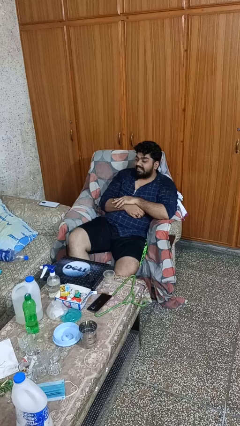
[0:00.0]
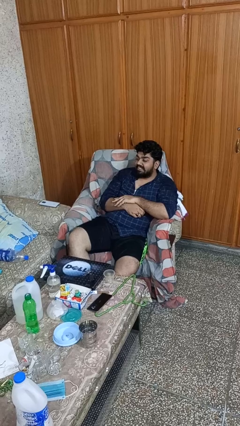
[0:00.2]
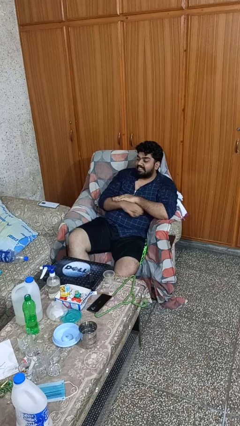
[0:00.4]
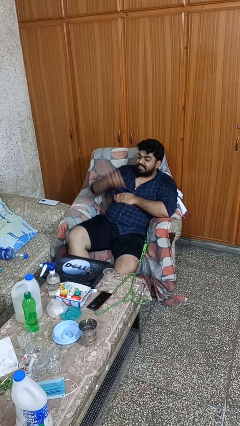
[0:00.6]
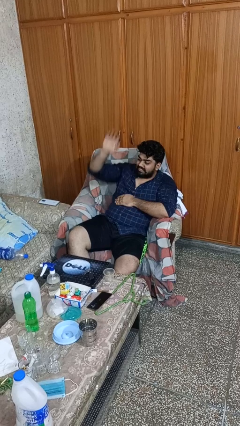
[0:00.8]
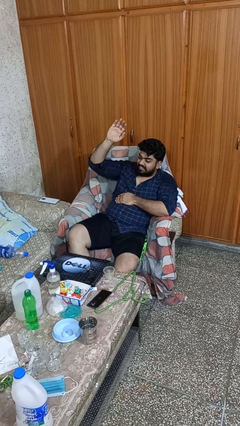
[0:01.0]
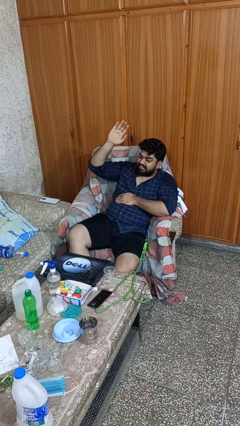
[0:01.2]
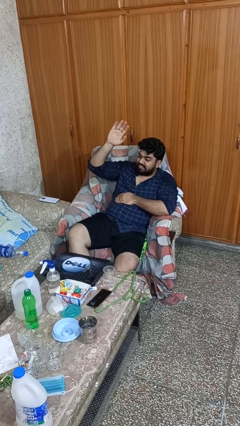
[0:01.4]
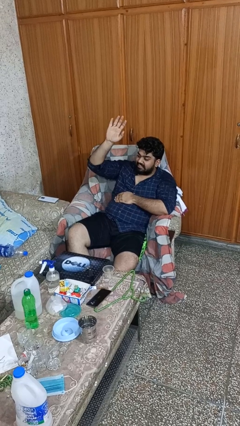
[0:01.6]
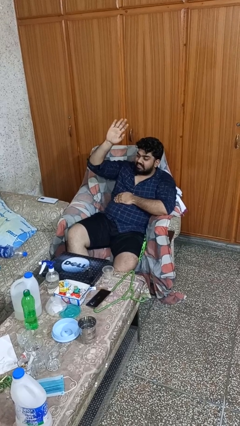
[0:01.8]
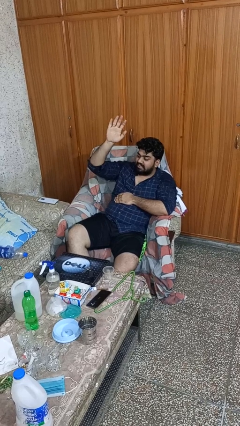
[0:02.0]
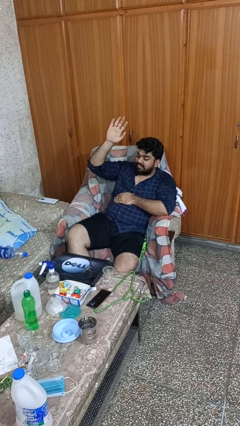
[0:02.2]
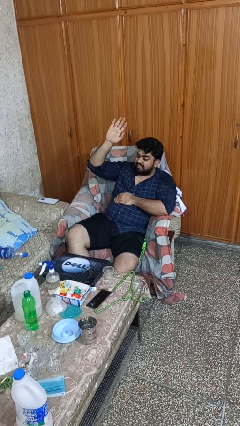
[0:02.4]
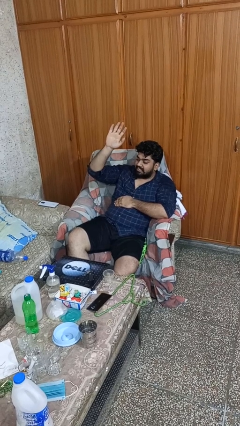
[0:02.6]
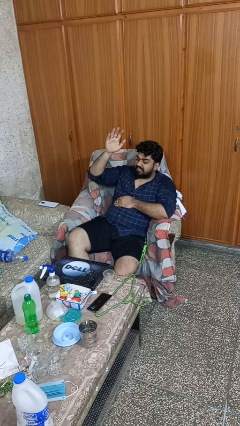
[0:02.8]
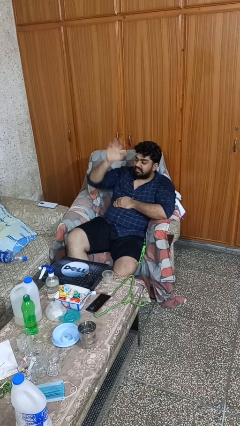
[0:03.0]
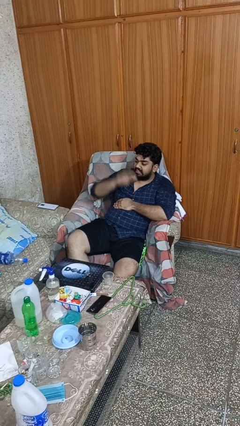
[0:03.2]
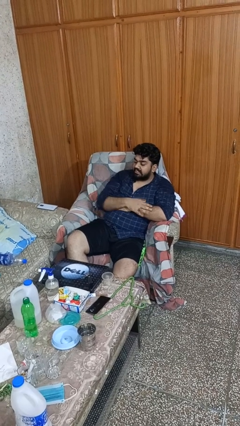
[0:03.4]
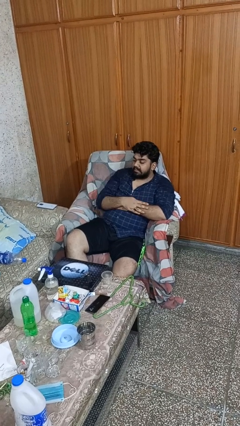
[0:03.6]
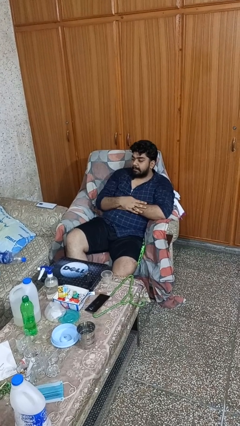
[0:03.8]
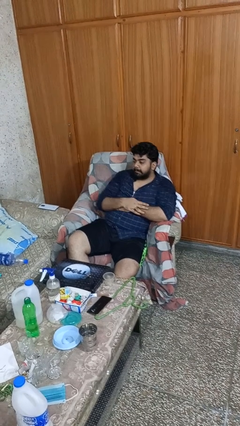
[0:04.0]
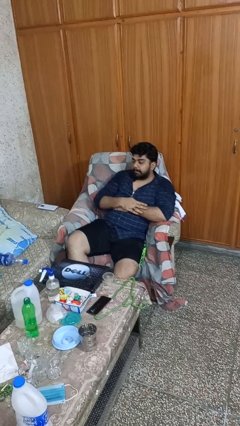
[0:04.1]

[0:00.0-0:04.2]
person gestures raise hand

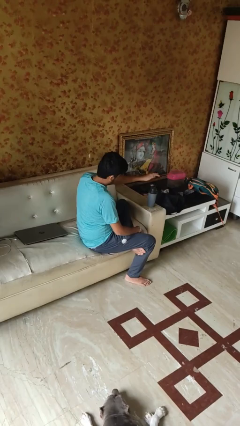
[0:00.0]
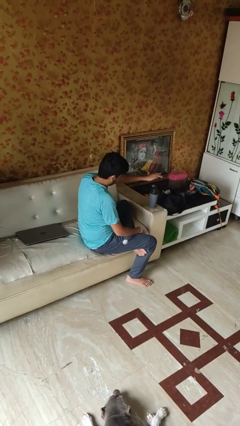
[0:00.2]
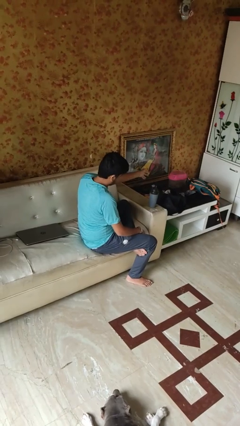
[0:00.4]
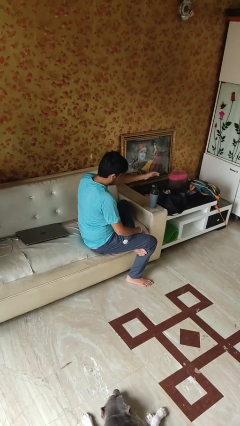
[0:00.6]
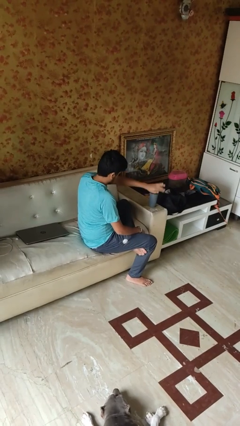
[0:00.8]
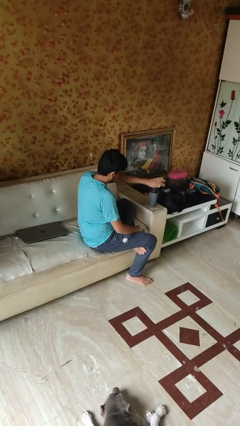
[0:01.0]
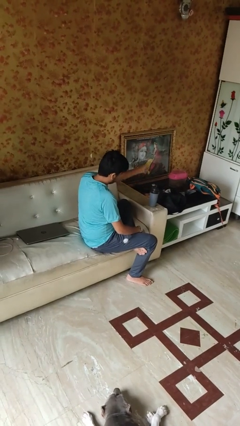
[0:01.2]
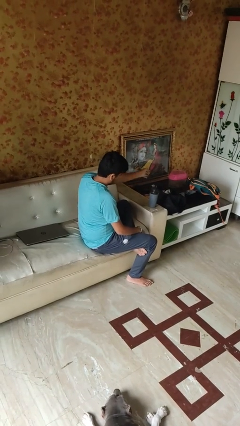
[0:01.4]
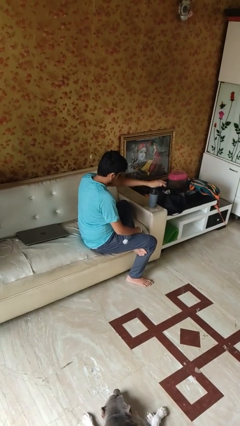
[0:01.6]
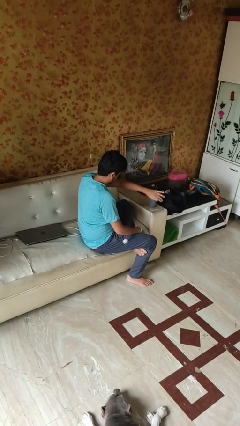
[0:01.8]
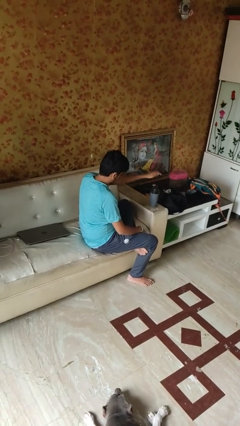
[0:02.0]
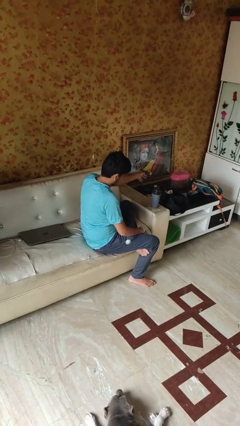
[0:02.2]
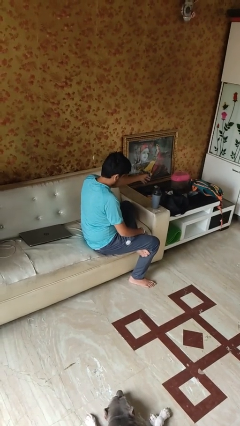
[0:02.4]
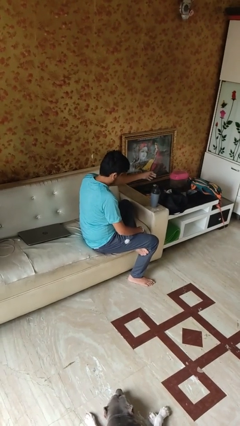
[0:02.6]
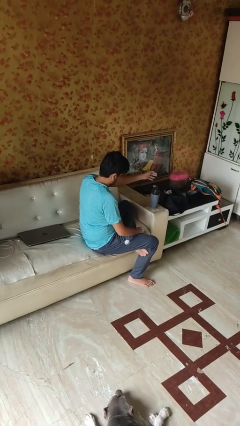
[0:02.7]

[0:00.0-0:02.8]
person waves hand over object

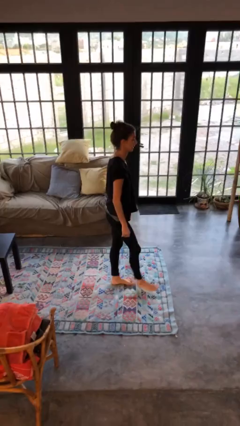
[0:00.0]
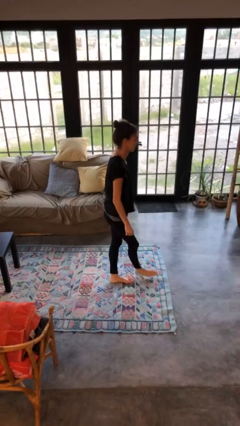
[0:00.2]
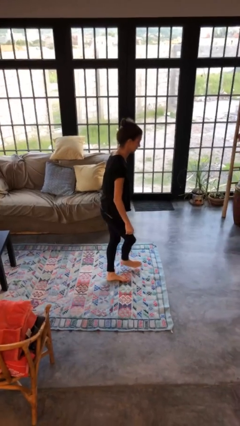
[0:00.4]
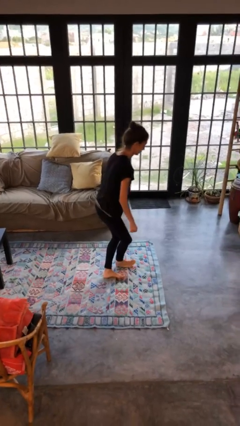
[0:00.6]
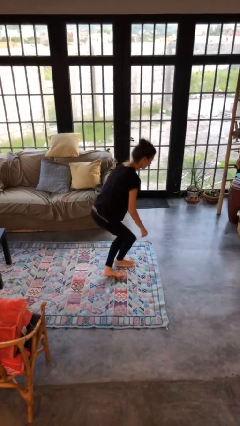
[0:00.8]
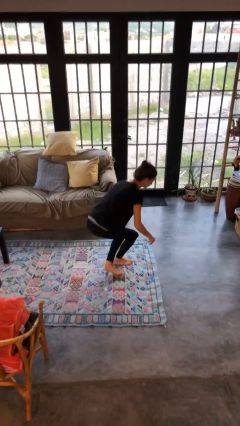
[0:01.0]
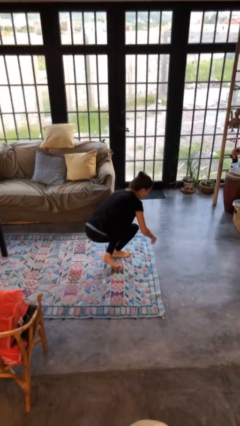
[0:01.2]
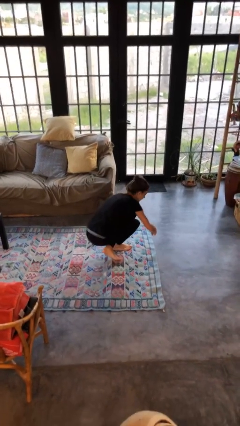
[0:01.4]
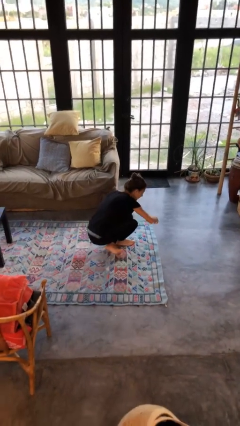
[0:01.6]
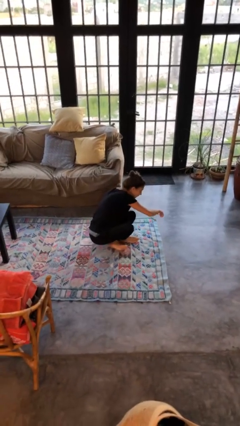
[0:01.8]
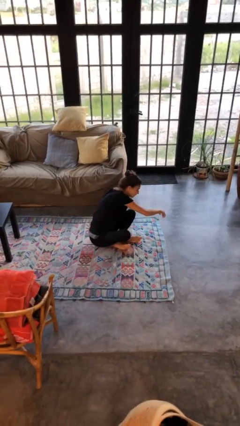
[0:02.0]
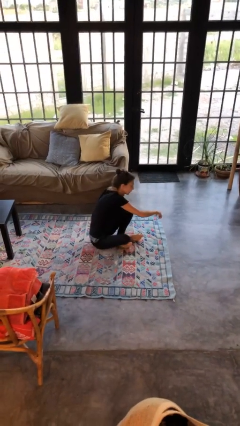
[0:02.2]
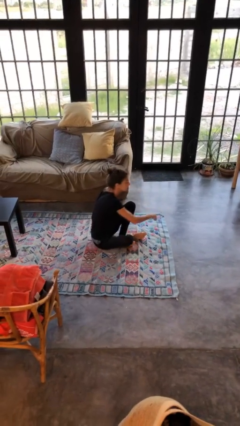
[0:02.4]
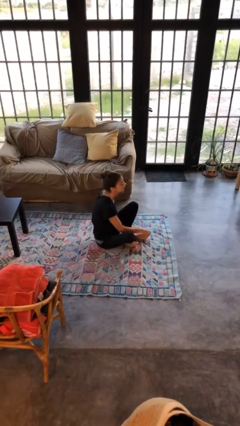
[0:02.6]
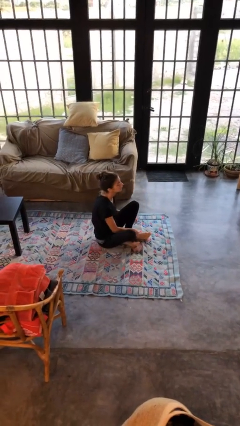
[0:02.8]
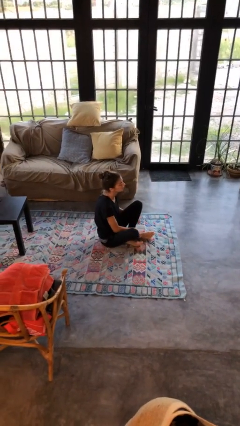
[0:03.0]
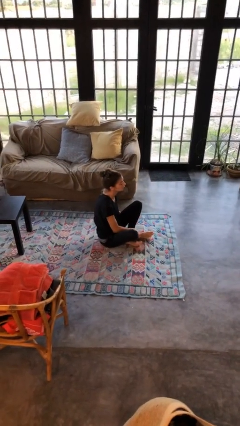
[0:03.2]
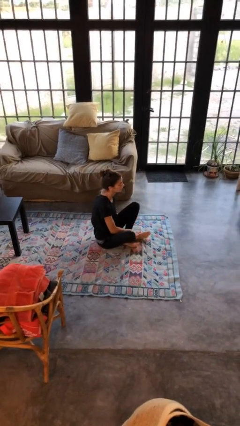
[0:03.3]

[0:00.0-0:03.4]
person sits crisscross

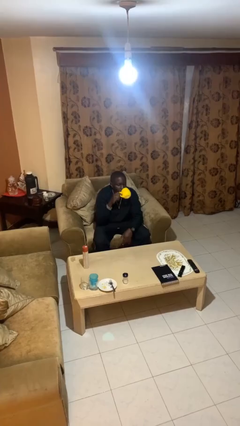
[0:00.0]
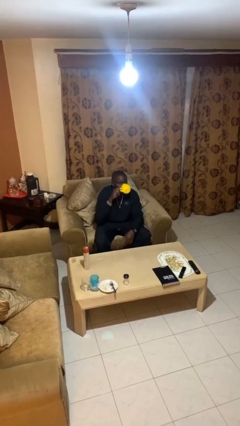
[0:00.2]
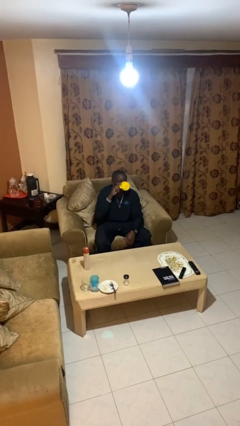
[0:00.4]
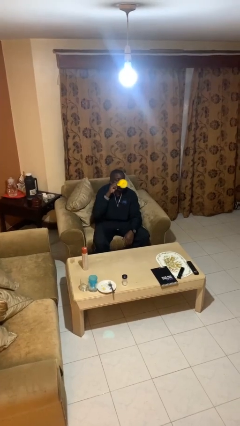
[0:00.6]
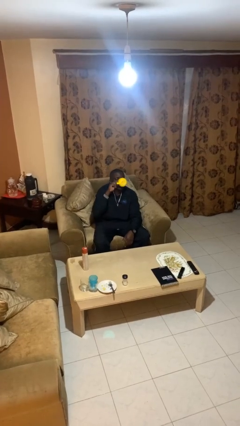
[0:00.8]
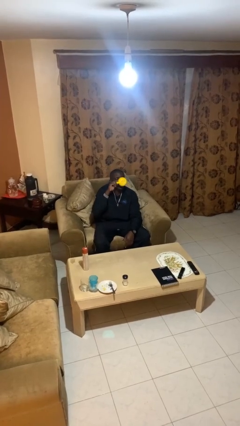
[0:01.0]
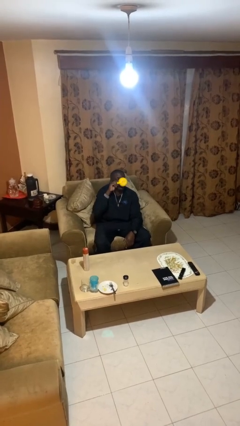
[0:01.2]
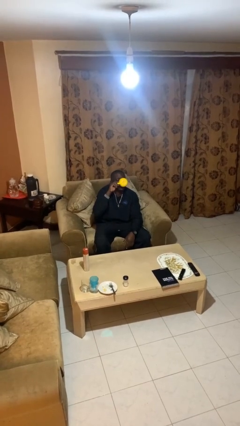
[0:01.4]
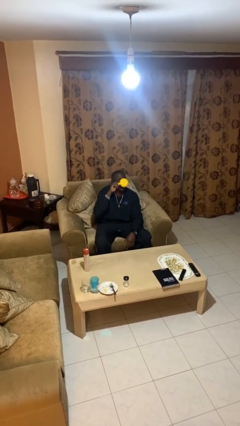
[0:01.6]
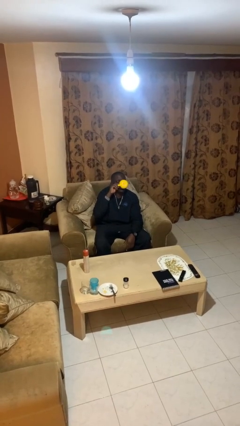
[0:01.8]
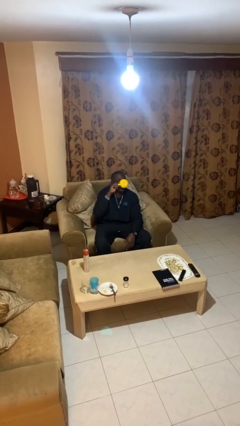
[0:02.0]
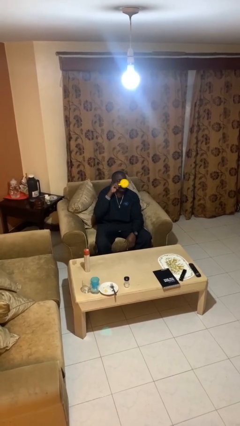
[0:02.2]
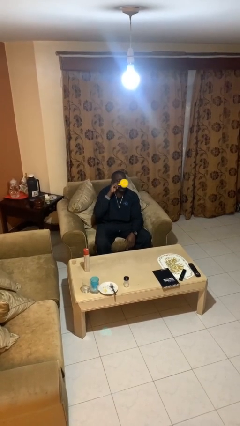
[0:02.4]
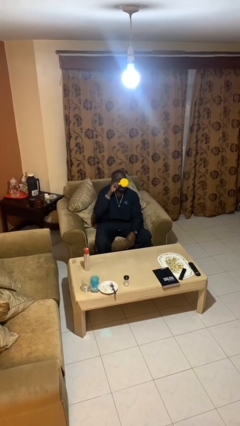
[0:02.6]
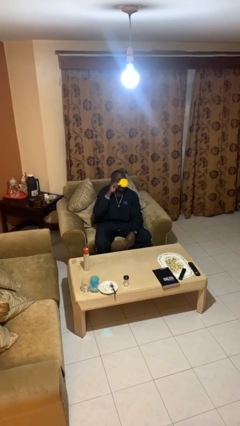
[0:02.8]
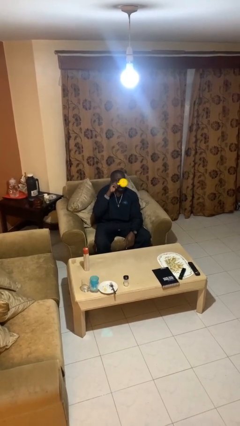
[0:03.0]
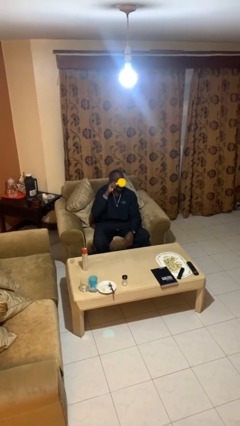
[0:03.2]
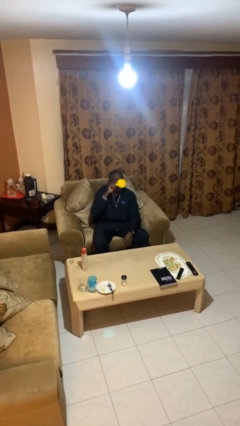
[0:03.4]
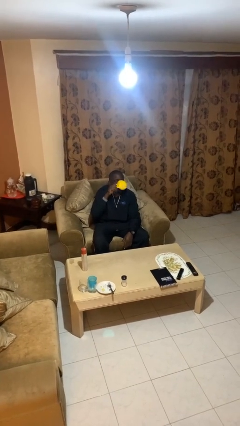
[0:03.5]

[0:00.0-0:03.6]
person drinks from mug

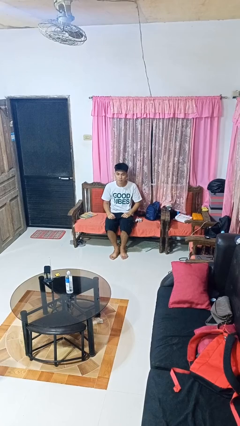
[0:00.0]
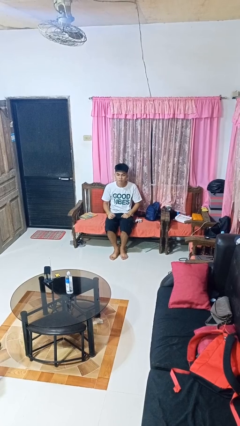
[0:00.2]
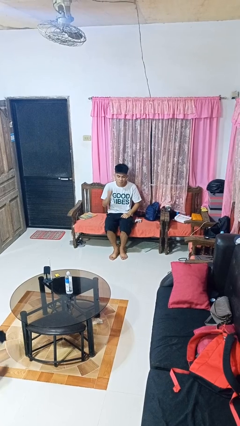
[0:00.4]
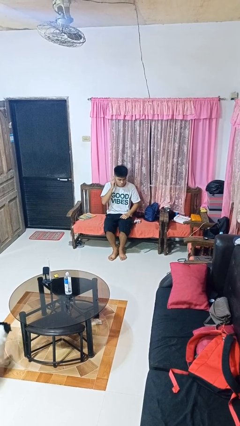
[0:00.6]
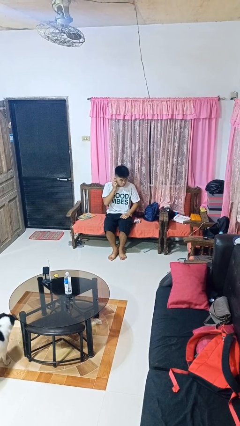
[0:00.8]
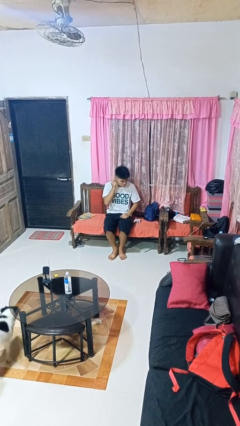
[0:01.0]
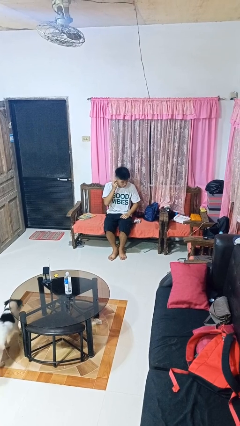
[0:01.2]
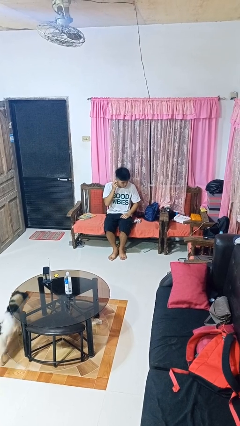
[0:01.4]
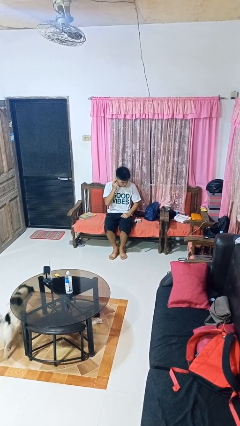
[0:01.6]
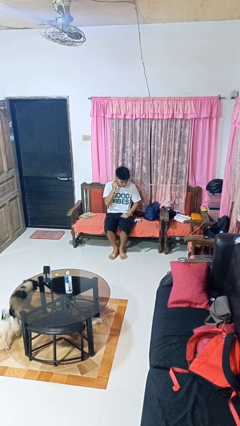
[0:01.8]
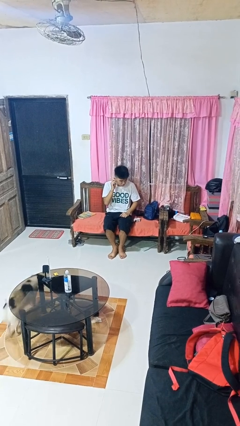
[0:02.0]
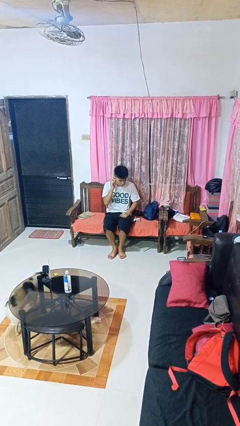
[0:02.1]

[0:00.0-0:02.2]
person touches earlobe

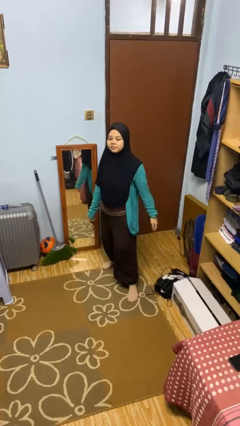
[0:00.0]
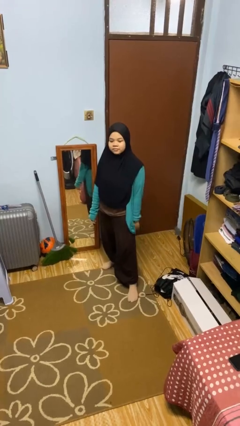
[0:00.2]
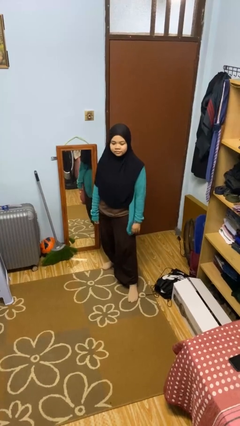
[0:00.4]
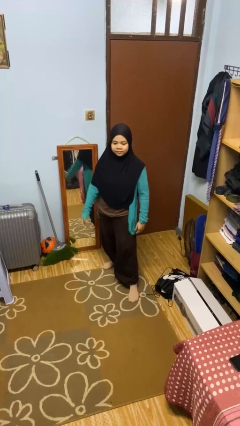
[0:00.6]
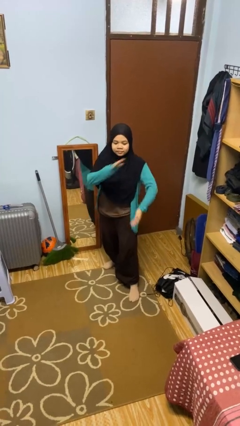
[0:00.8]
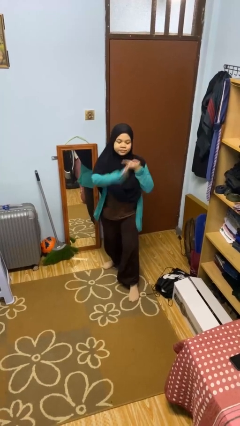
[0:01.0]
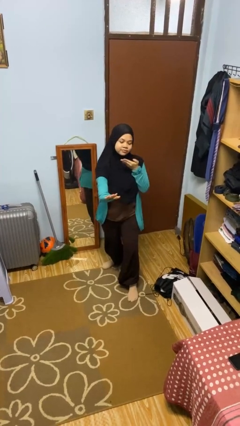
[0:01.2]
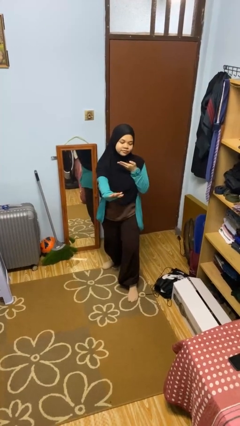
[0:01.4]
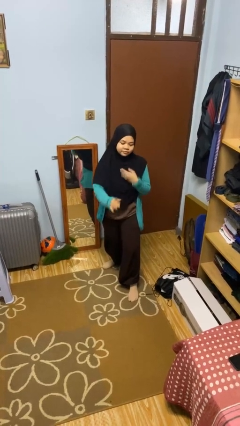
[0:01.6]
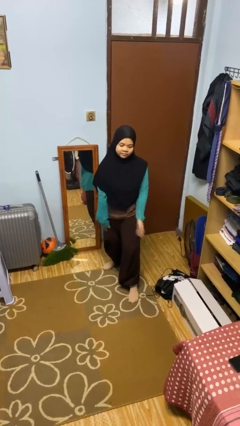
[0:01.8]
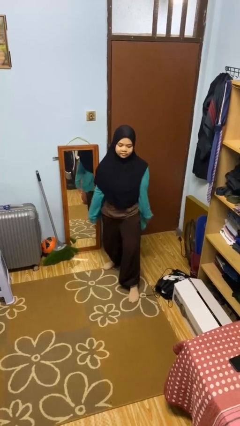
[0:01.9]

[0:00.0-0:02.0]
person karate chop
